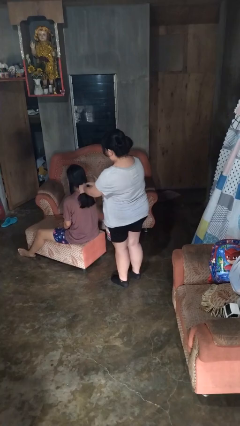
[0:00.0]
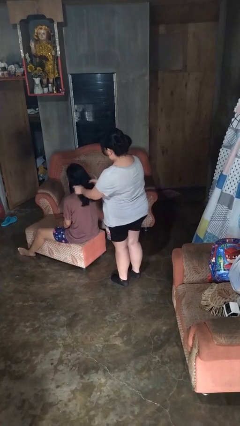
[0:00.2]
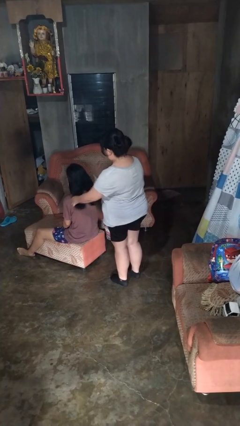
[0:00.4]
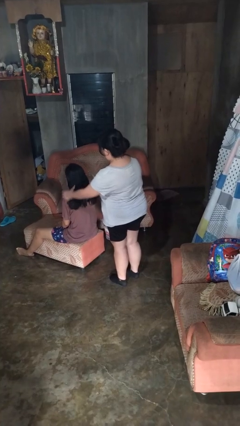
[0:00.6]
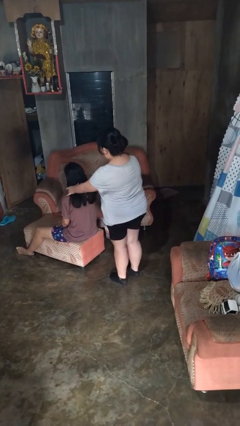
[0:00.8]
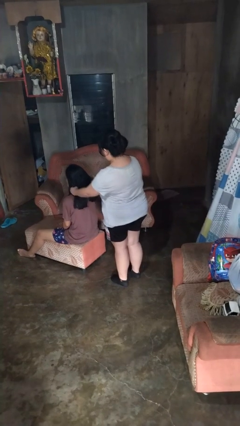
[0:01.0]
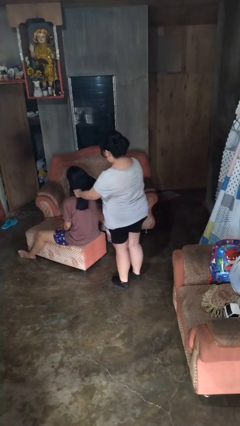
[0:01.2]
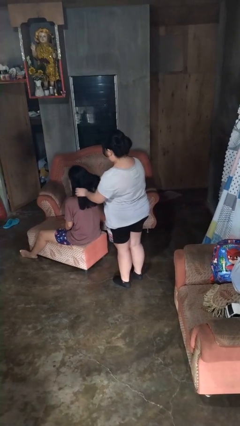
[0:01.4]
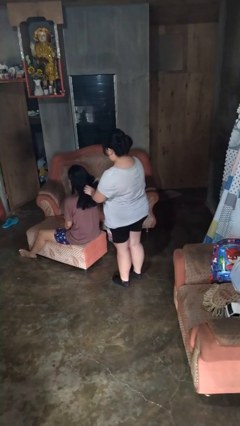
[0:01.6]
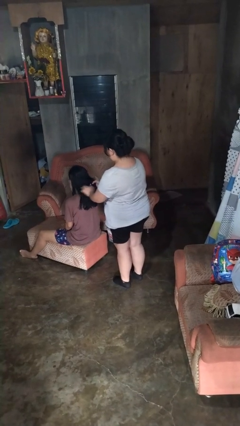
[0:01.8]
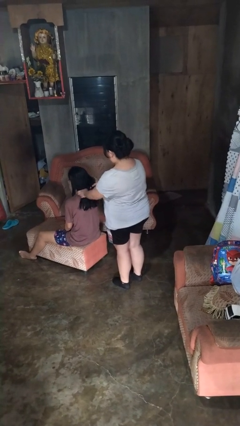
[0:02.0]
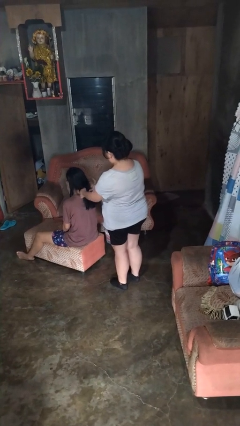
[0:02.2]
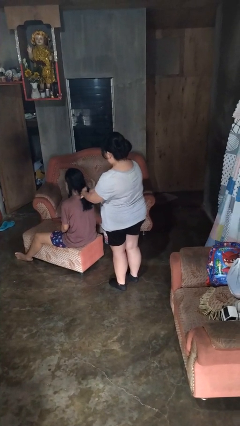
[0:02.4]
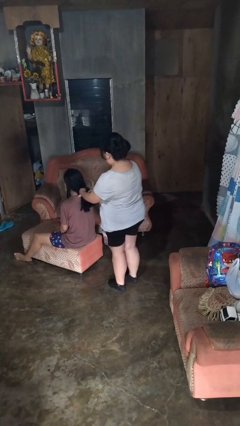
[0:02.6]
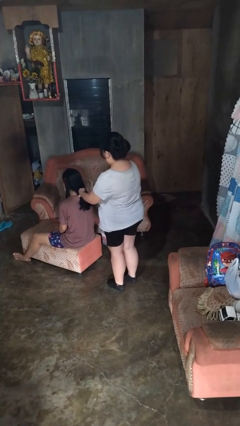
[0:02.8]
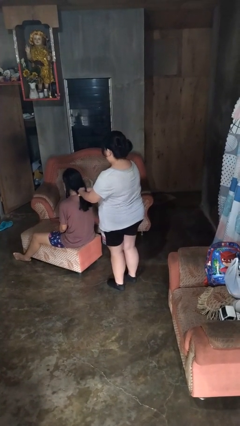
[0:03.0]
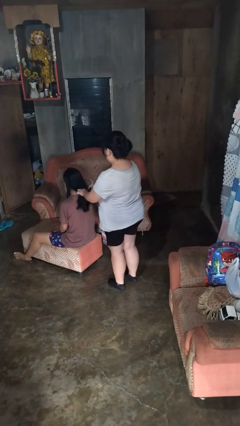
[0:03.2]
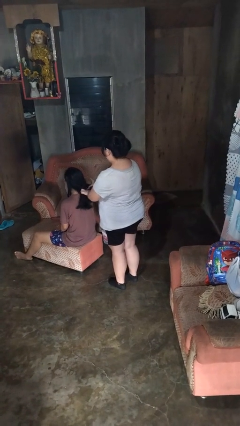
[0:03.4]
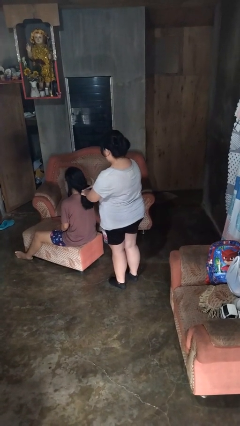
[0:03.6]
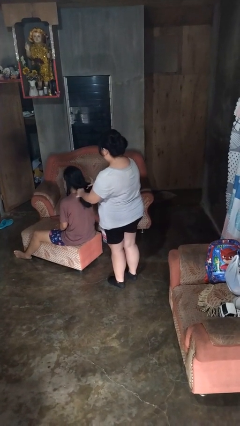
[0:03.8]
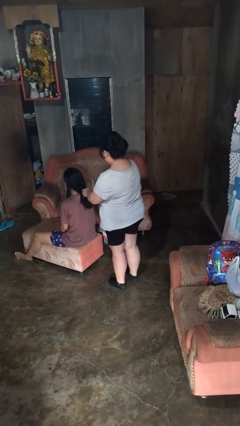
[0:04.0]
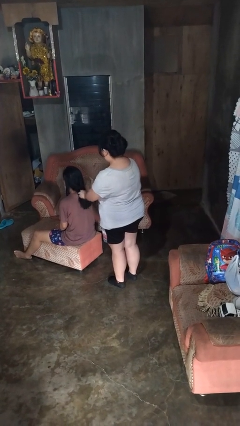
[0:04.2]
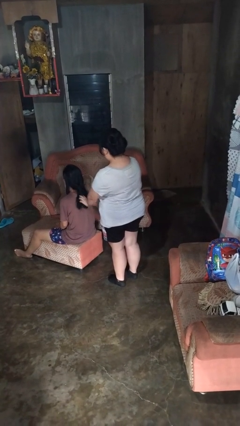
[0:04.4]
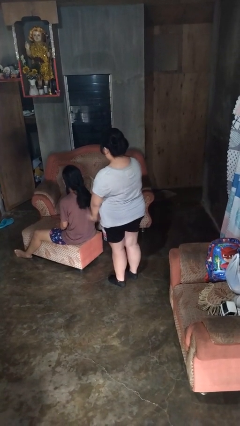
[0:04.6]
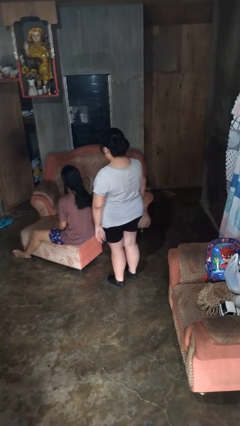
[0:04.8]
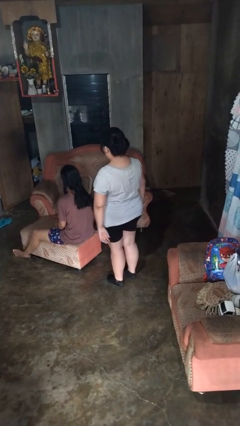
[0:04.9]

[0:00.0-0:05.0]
person braids hair of person

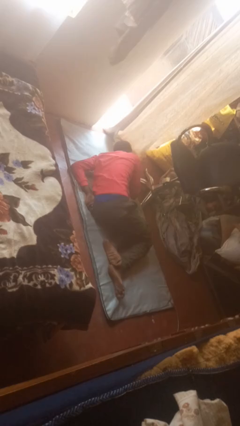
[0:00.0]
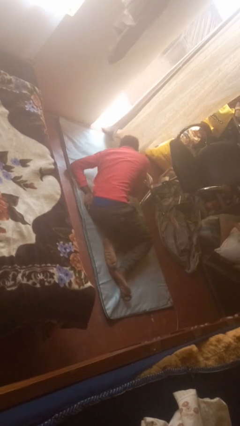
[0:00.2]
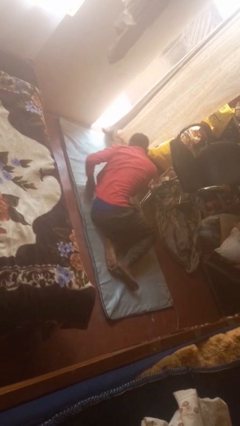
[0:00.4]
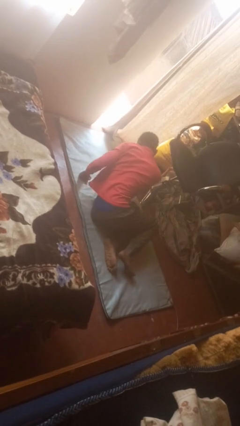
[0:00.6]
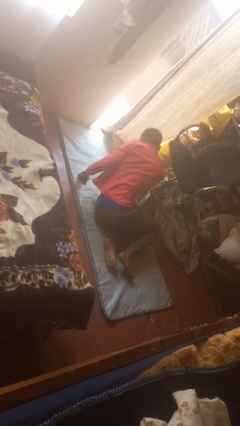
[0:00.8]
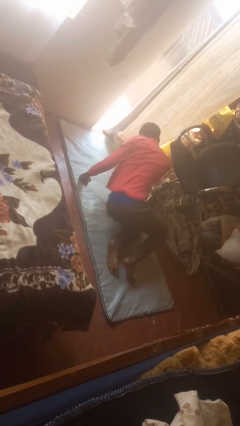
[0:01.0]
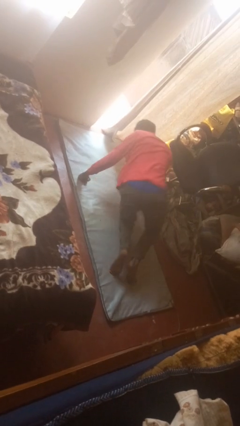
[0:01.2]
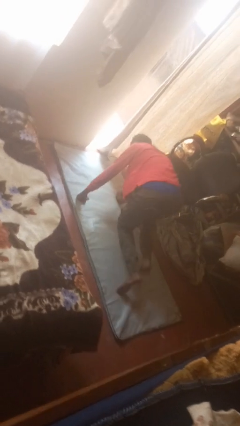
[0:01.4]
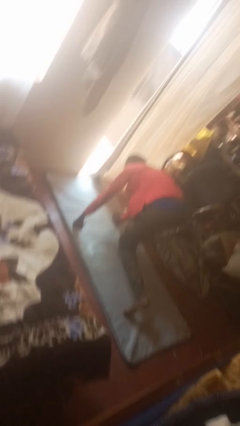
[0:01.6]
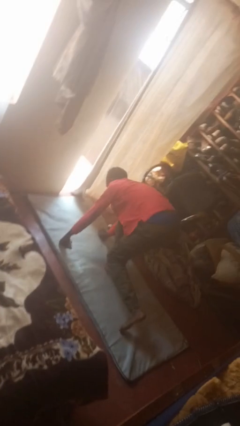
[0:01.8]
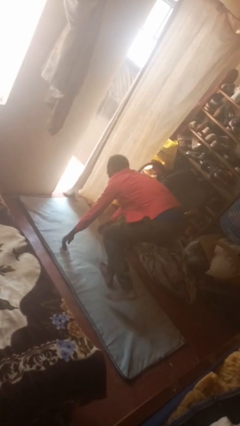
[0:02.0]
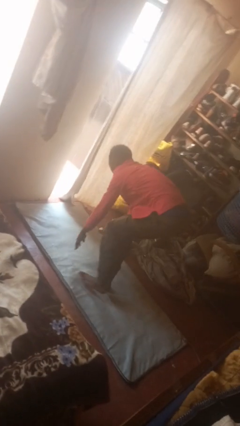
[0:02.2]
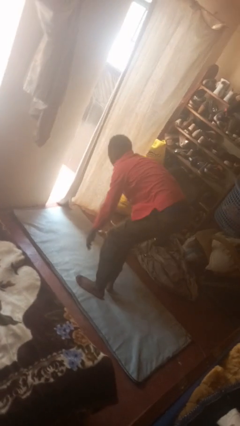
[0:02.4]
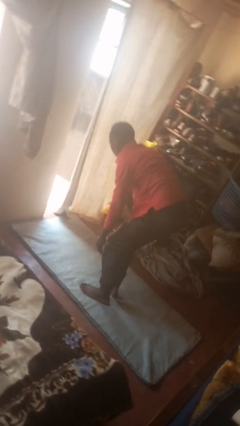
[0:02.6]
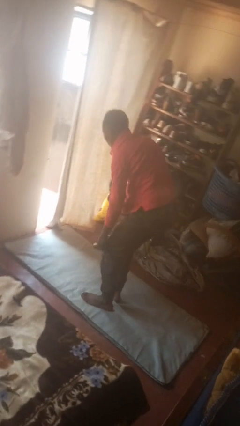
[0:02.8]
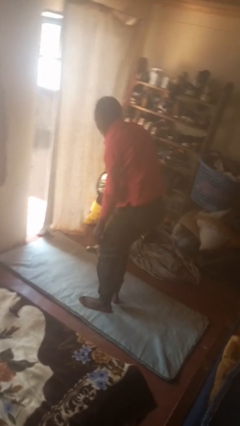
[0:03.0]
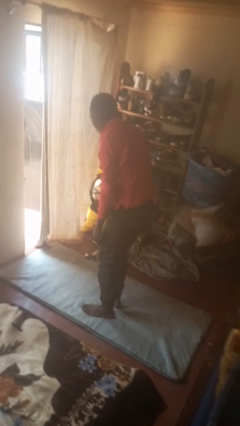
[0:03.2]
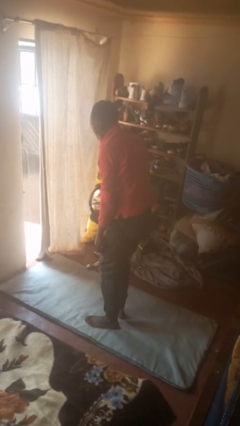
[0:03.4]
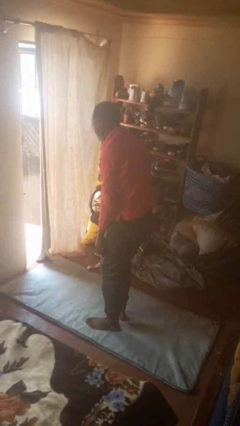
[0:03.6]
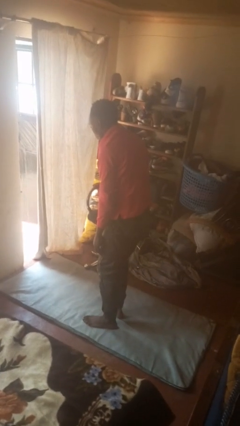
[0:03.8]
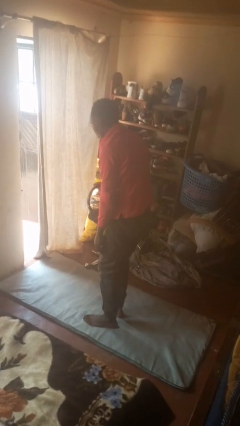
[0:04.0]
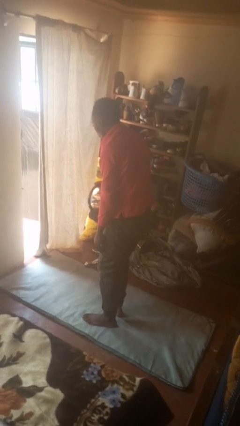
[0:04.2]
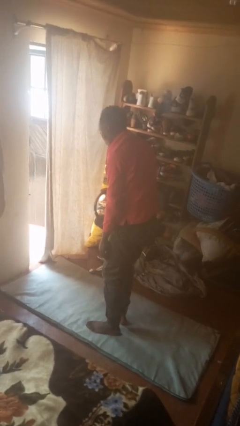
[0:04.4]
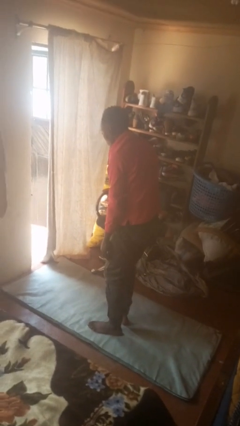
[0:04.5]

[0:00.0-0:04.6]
person stands up from floor

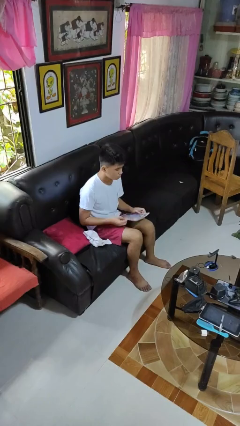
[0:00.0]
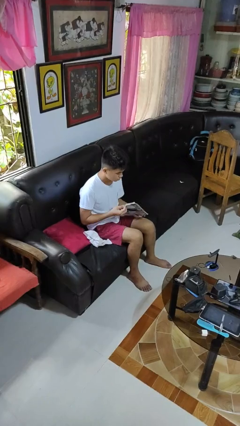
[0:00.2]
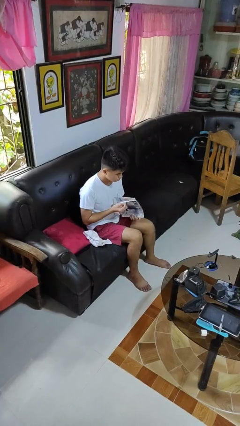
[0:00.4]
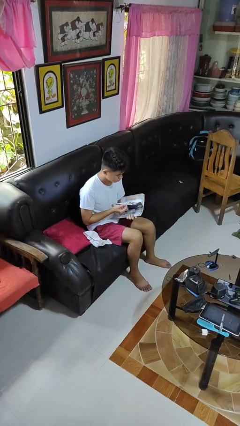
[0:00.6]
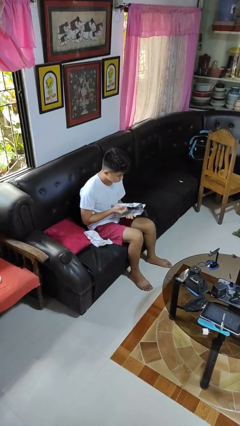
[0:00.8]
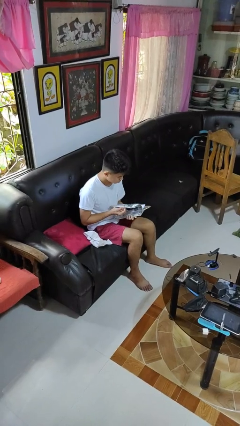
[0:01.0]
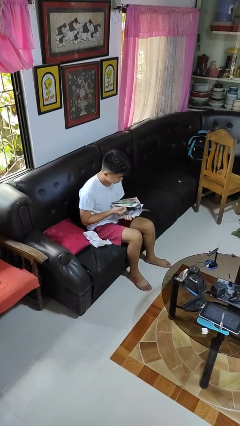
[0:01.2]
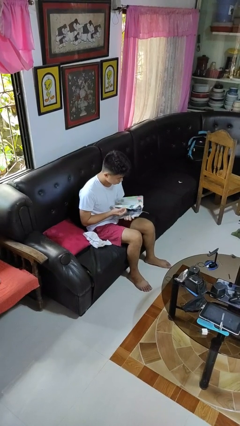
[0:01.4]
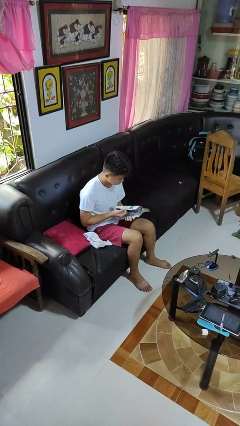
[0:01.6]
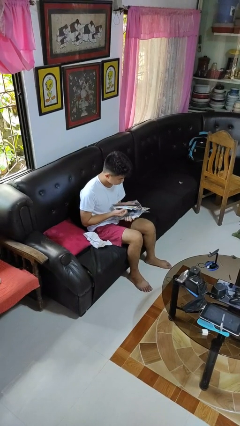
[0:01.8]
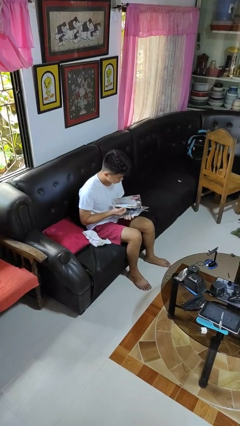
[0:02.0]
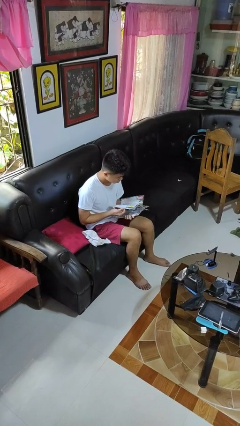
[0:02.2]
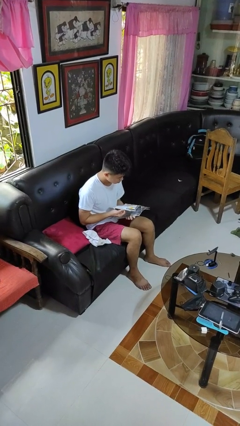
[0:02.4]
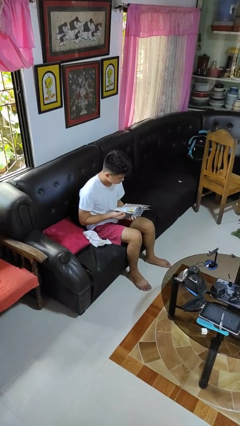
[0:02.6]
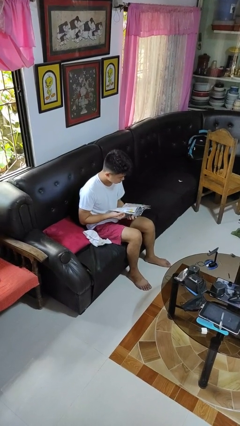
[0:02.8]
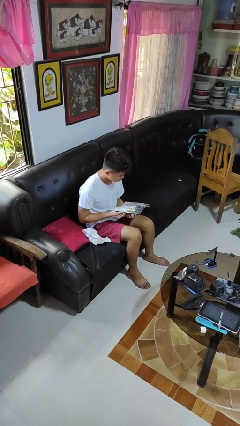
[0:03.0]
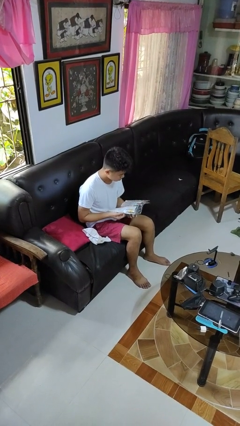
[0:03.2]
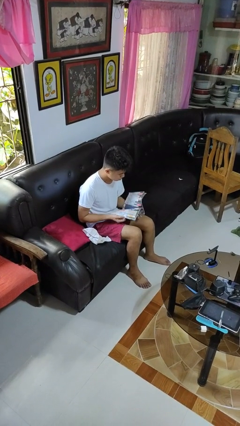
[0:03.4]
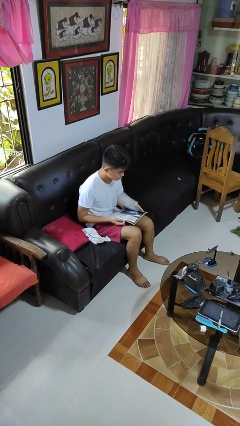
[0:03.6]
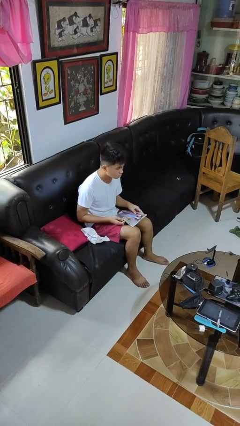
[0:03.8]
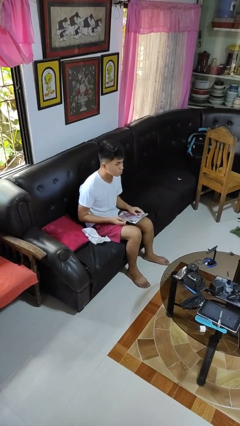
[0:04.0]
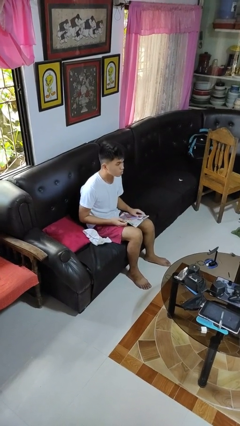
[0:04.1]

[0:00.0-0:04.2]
person reads magazine

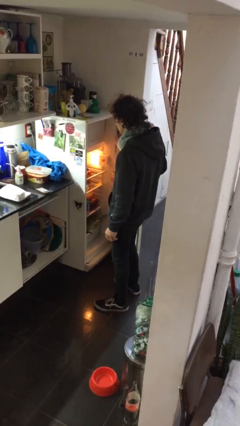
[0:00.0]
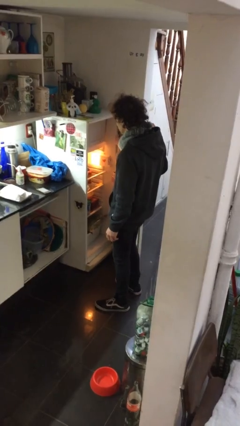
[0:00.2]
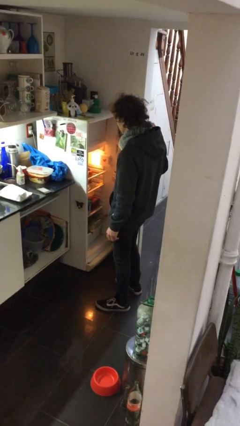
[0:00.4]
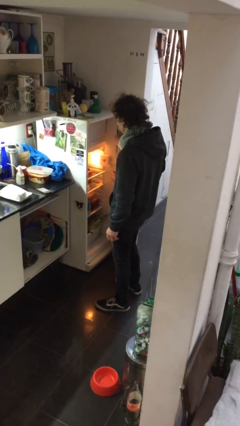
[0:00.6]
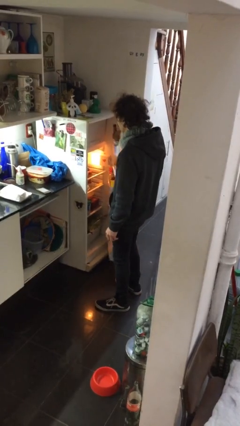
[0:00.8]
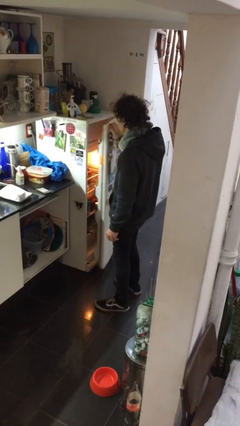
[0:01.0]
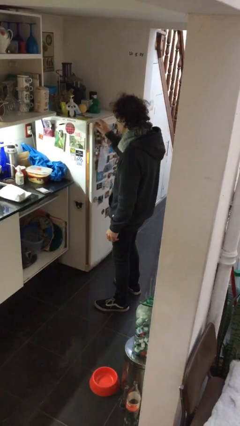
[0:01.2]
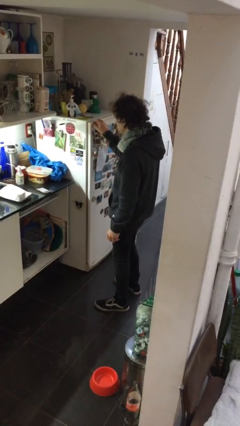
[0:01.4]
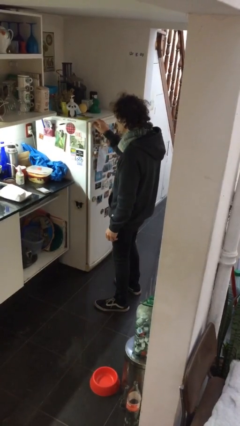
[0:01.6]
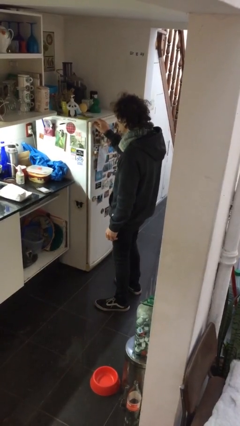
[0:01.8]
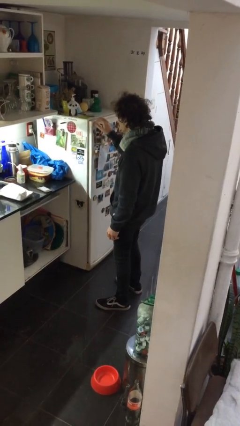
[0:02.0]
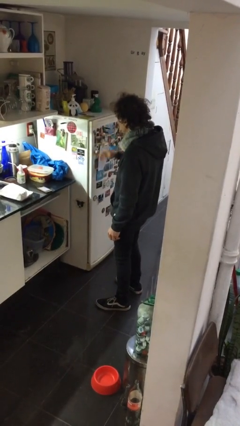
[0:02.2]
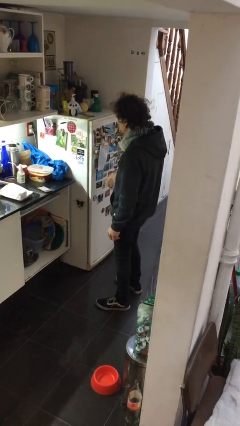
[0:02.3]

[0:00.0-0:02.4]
person closes refrigerator

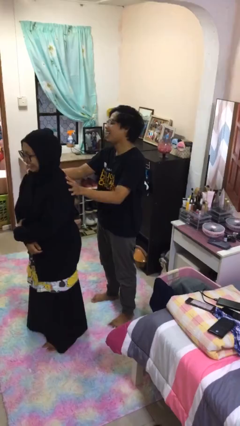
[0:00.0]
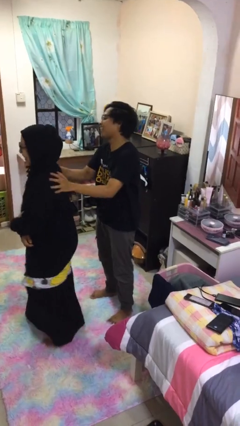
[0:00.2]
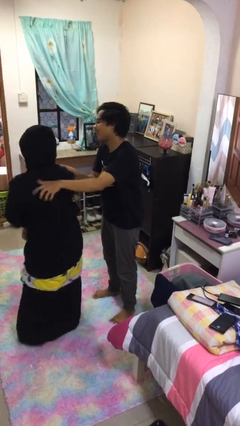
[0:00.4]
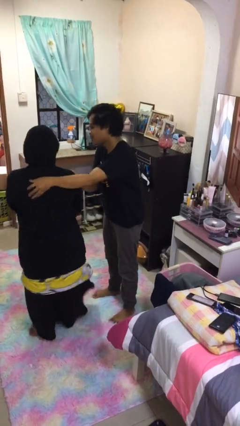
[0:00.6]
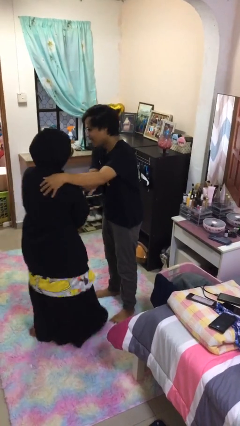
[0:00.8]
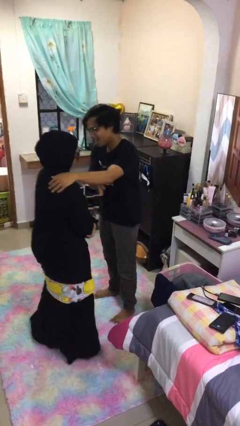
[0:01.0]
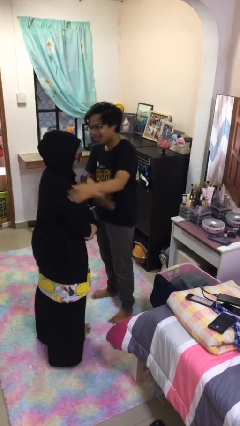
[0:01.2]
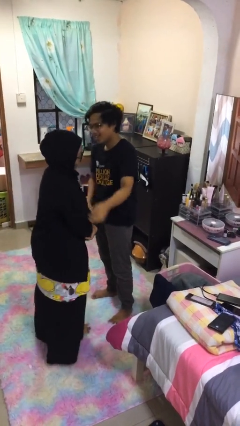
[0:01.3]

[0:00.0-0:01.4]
person spins person around
